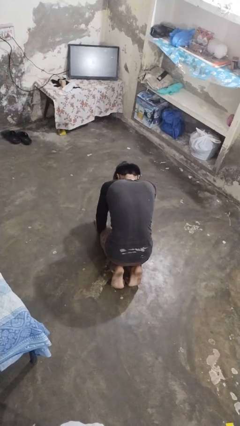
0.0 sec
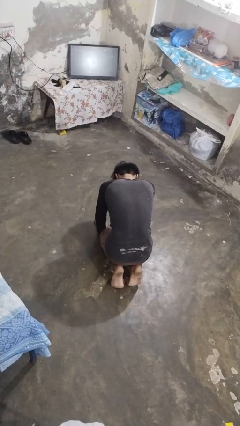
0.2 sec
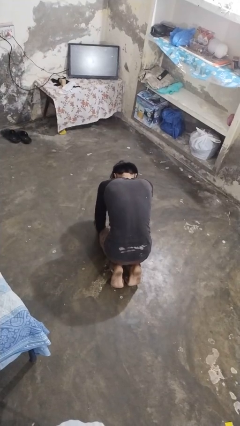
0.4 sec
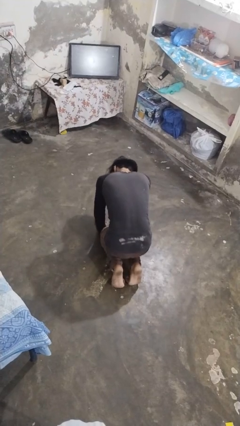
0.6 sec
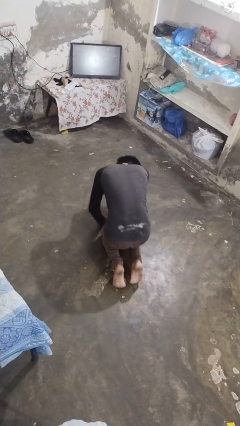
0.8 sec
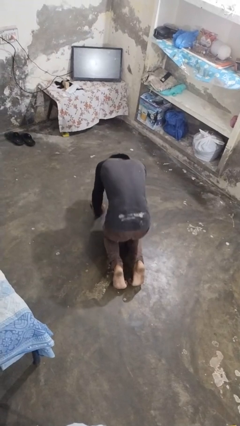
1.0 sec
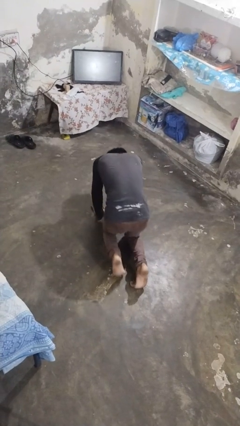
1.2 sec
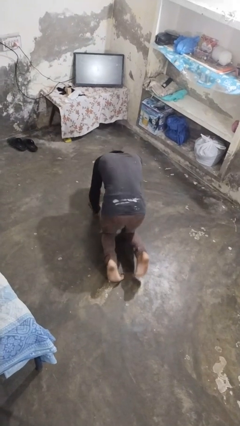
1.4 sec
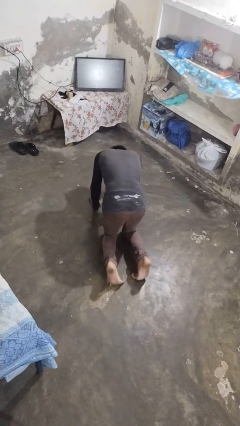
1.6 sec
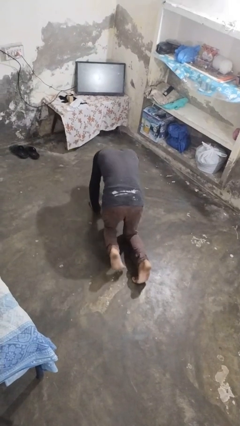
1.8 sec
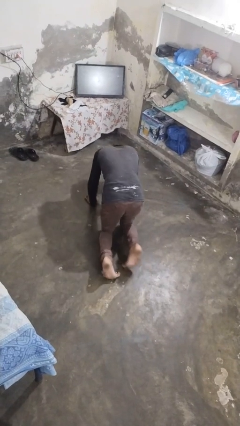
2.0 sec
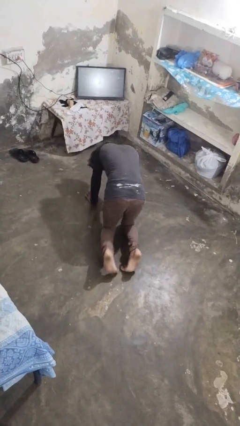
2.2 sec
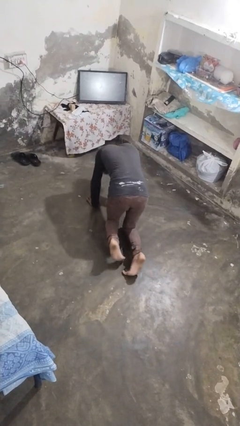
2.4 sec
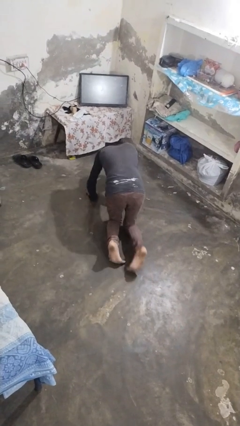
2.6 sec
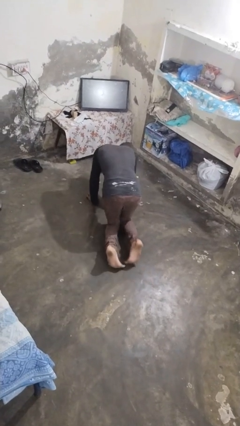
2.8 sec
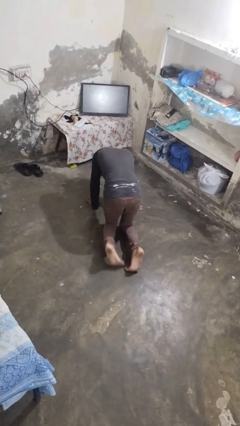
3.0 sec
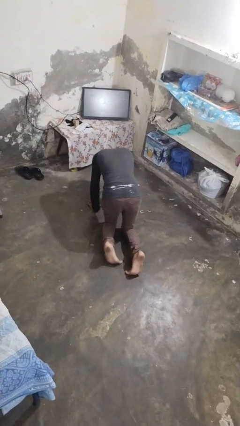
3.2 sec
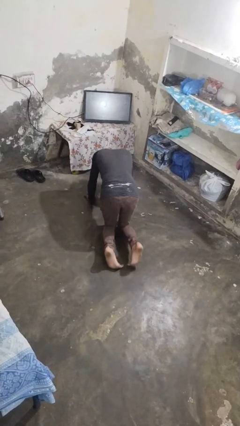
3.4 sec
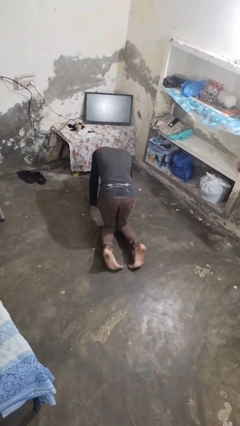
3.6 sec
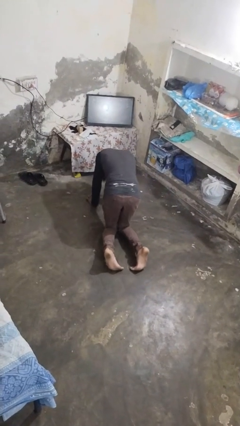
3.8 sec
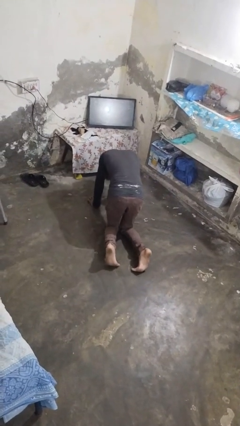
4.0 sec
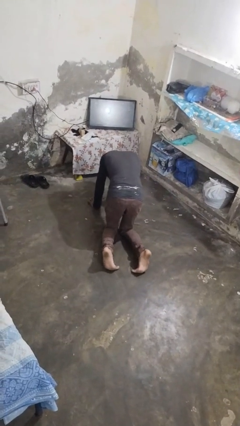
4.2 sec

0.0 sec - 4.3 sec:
person crawls

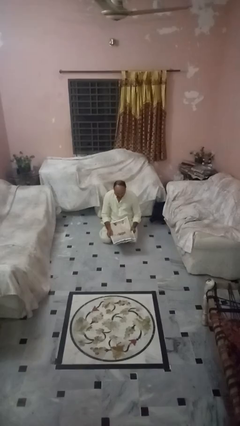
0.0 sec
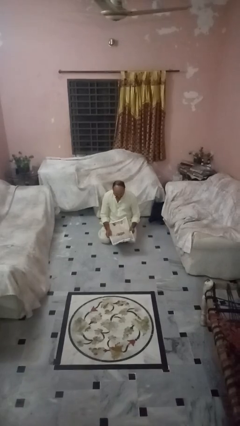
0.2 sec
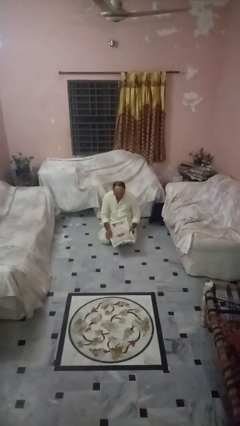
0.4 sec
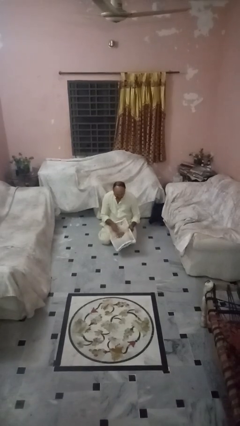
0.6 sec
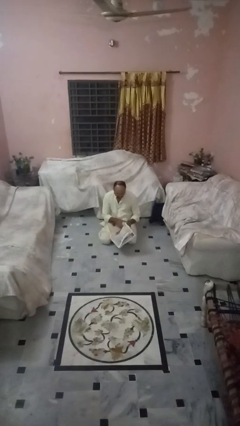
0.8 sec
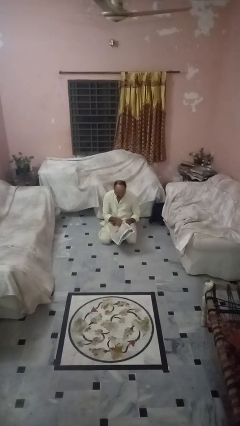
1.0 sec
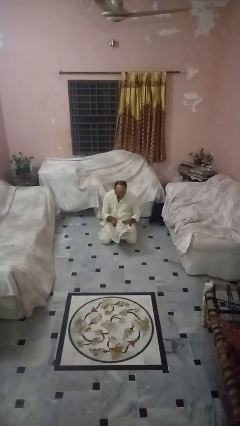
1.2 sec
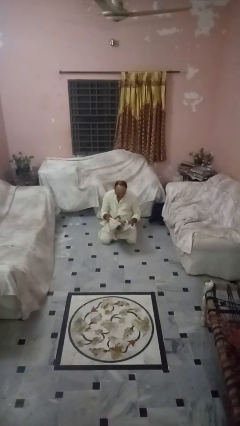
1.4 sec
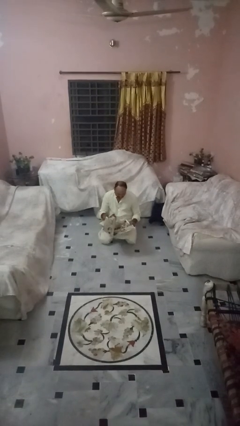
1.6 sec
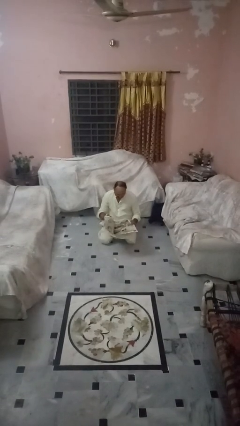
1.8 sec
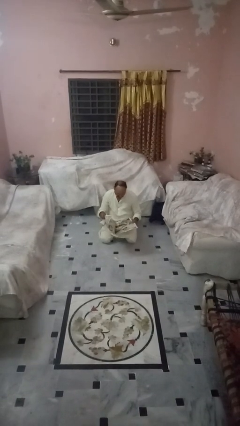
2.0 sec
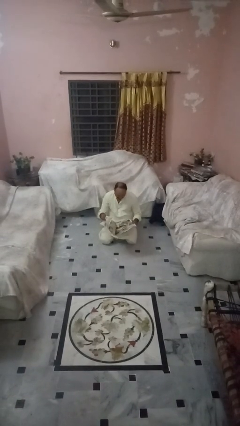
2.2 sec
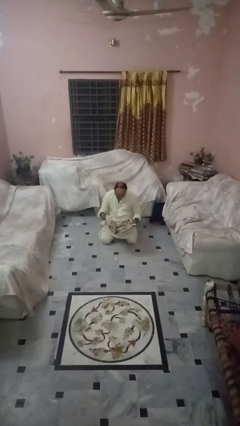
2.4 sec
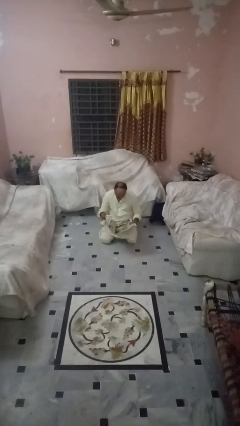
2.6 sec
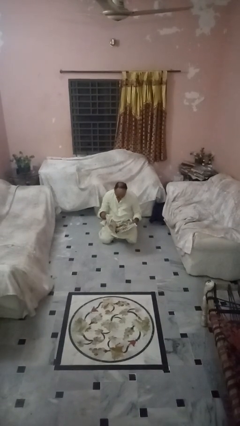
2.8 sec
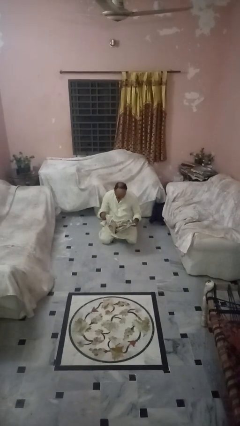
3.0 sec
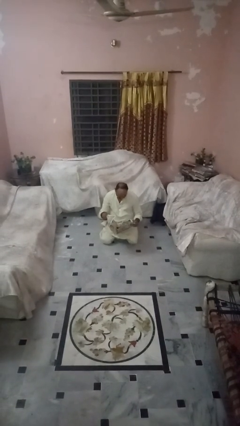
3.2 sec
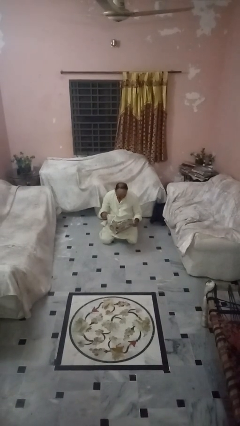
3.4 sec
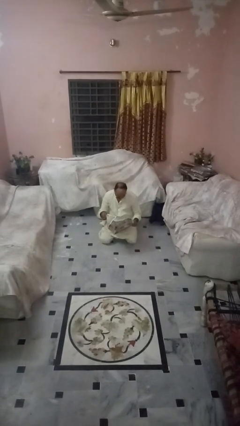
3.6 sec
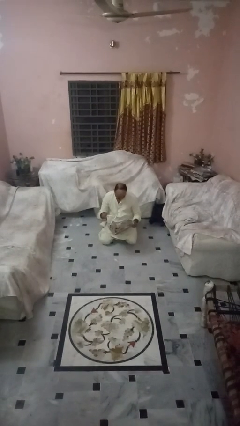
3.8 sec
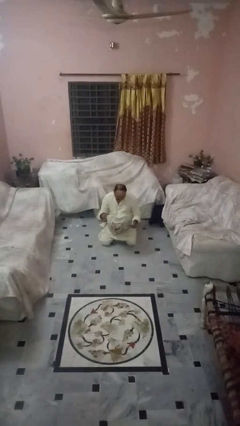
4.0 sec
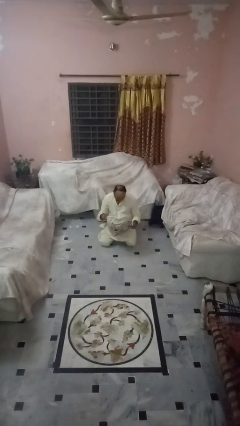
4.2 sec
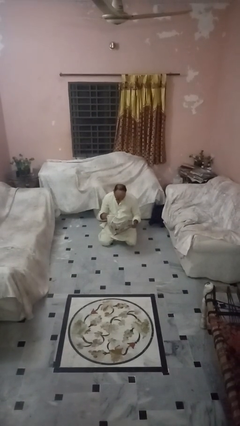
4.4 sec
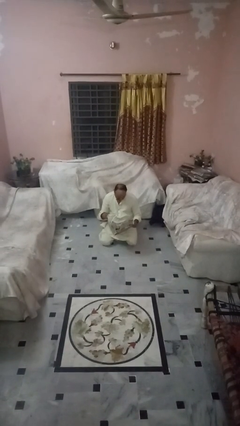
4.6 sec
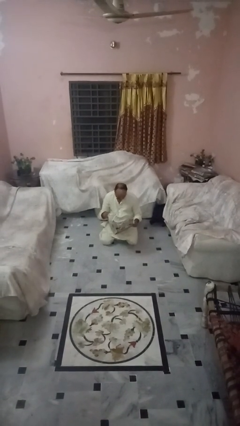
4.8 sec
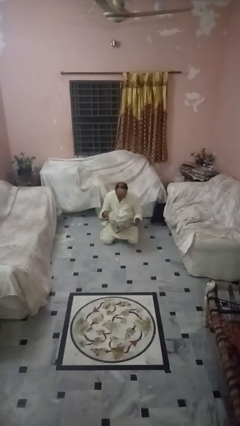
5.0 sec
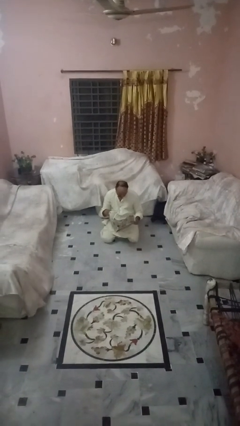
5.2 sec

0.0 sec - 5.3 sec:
person reads newspaper

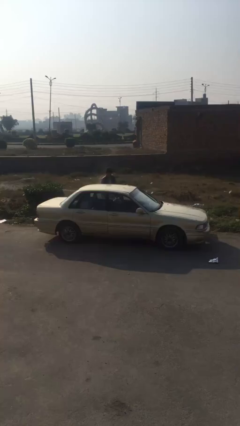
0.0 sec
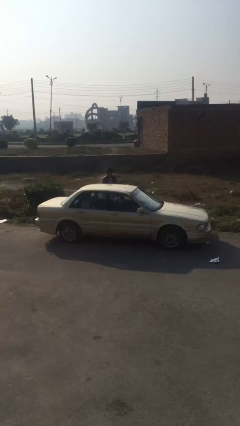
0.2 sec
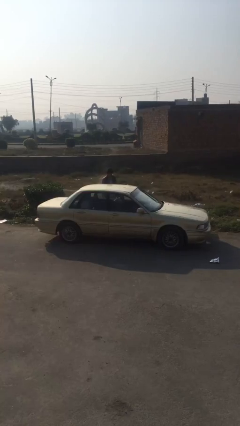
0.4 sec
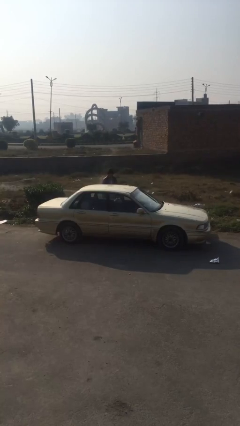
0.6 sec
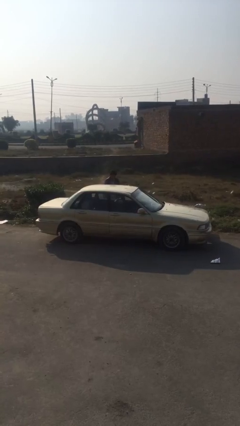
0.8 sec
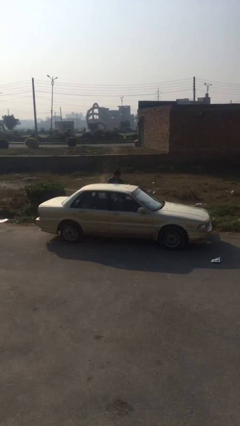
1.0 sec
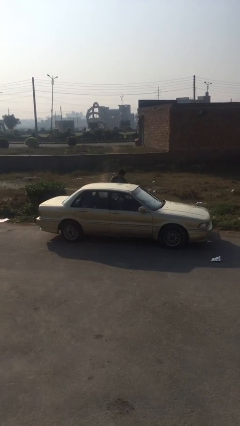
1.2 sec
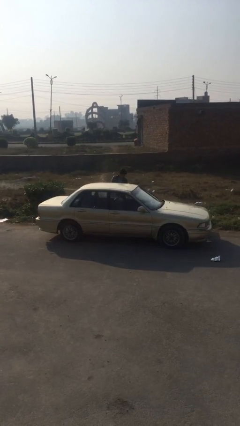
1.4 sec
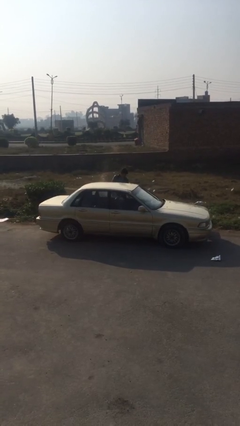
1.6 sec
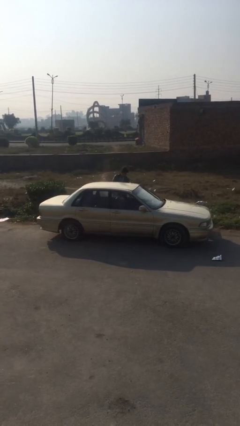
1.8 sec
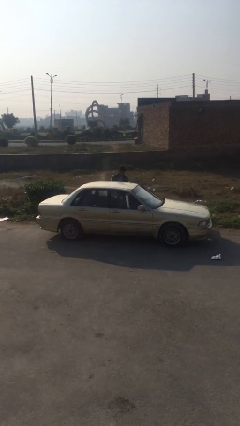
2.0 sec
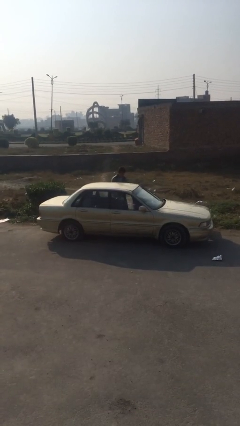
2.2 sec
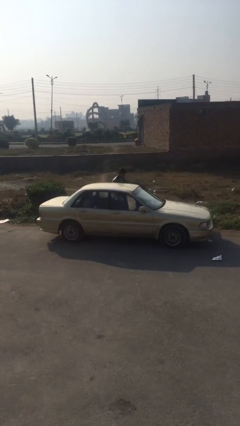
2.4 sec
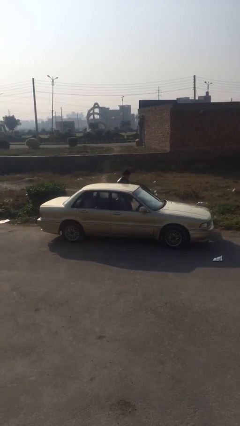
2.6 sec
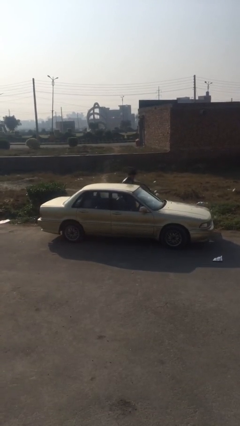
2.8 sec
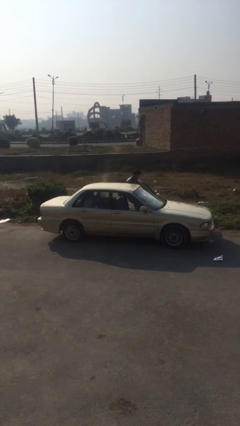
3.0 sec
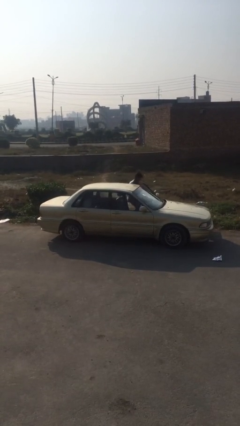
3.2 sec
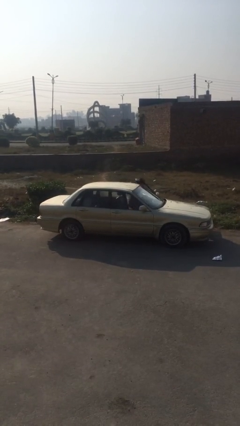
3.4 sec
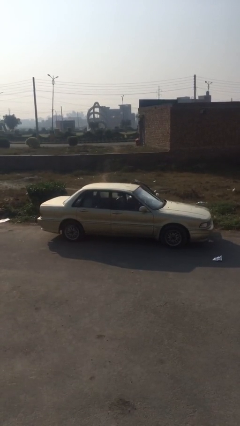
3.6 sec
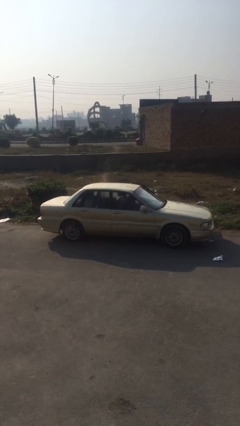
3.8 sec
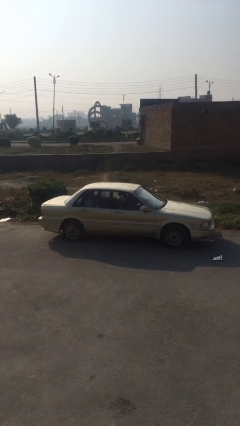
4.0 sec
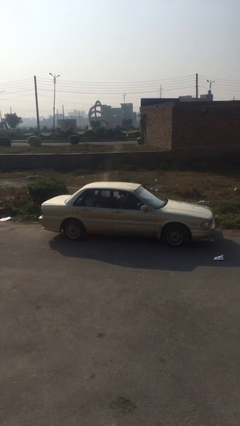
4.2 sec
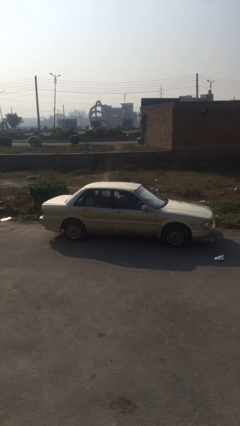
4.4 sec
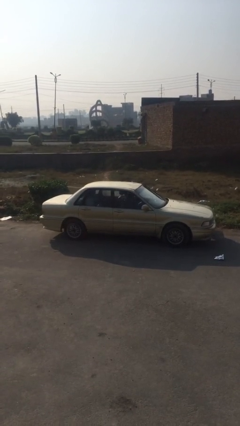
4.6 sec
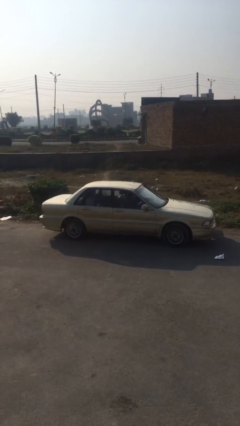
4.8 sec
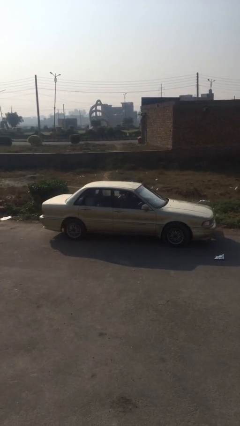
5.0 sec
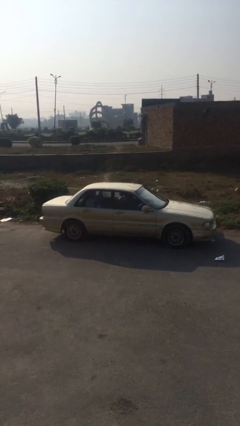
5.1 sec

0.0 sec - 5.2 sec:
car picks up person

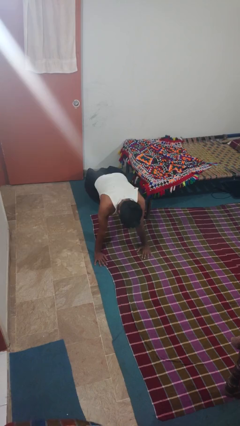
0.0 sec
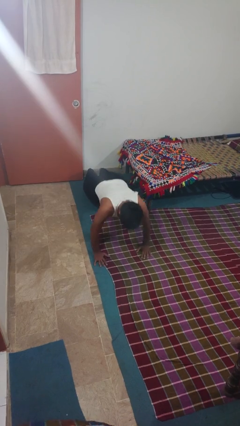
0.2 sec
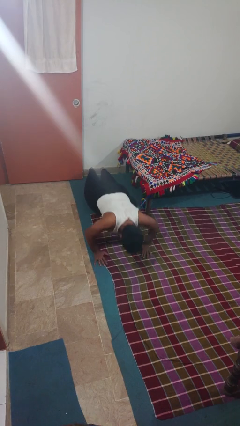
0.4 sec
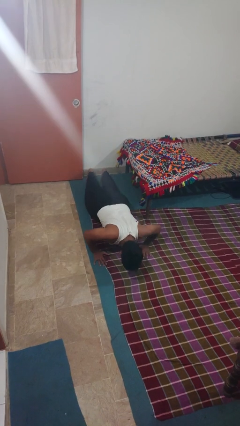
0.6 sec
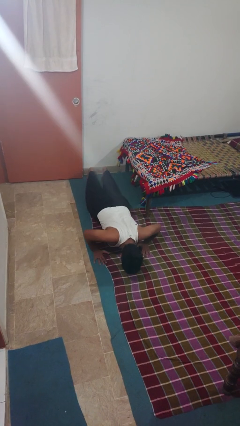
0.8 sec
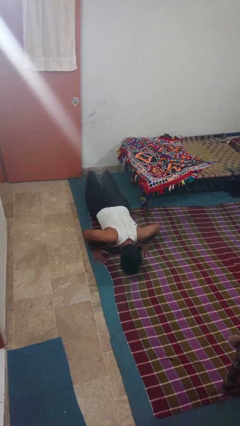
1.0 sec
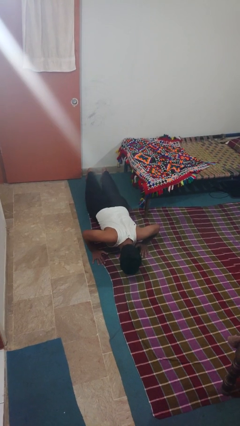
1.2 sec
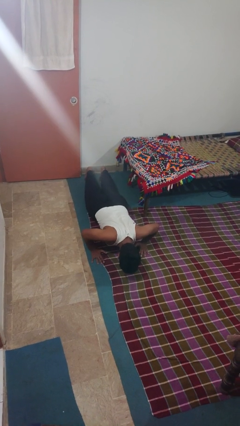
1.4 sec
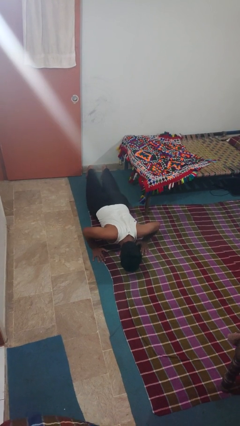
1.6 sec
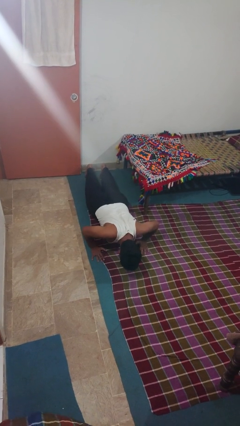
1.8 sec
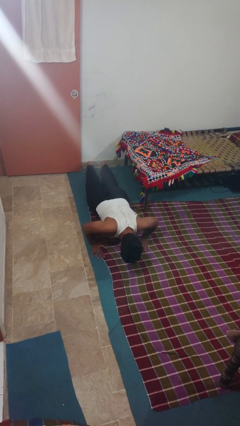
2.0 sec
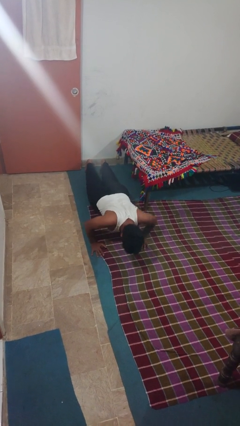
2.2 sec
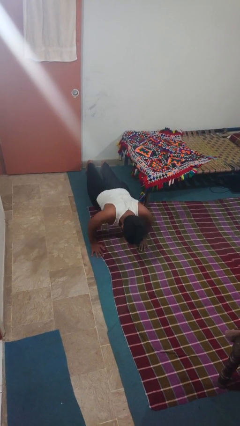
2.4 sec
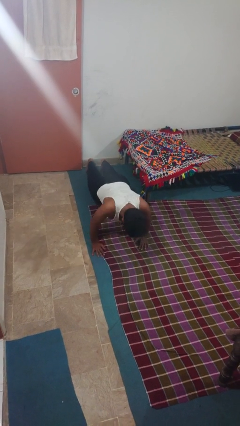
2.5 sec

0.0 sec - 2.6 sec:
person exercises with pushup

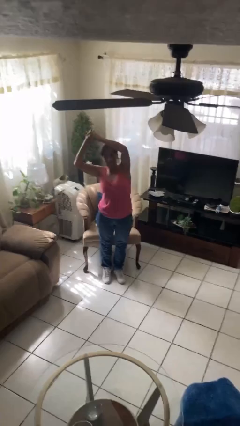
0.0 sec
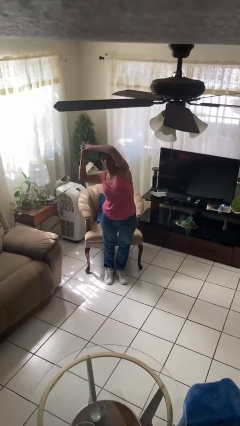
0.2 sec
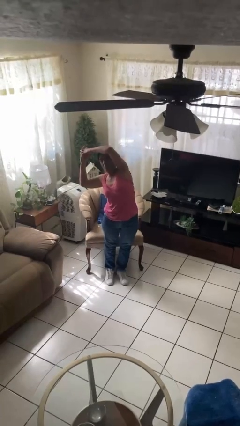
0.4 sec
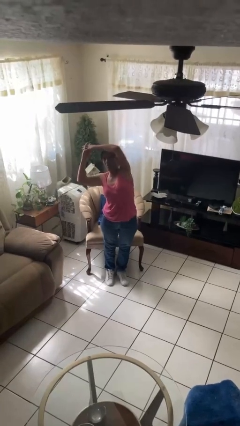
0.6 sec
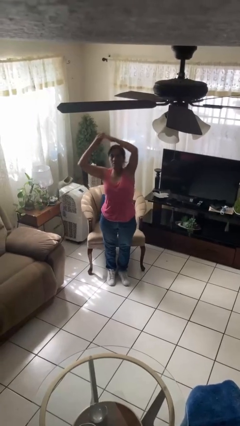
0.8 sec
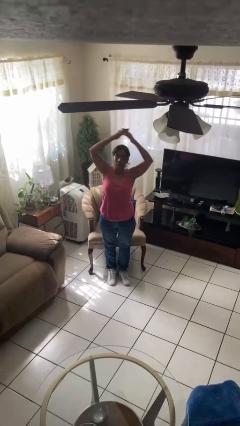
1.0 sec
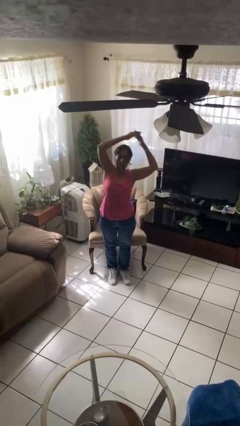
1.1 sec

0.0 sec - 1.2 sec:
person stretches arms over head
